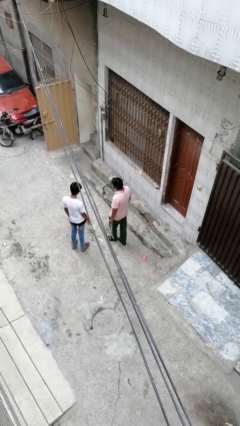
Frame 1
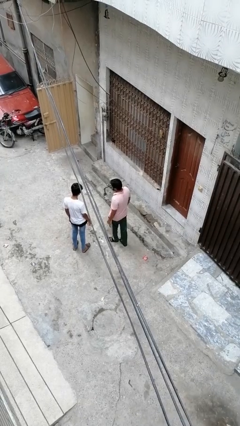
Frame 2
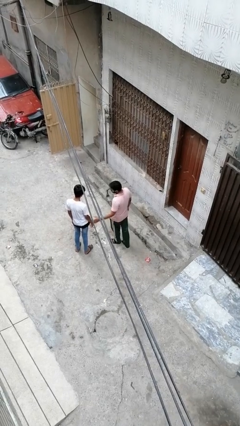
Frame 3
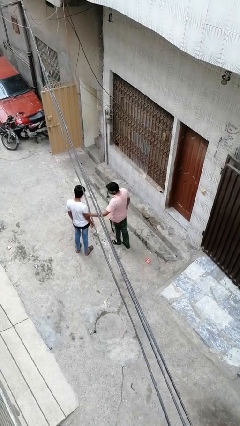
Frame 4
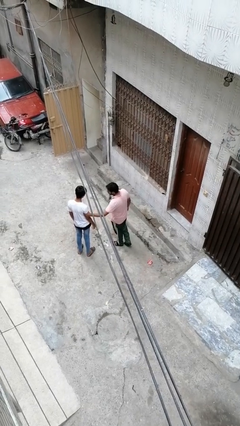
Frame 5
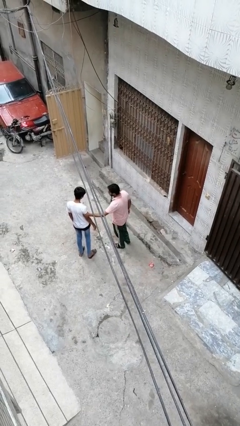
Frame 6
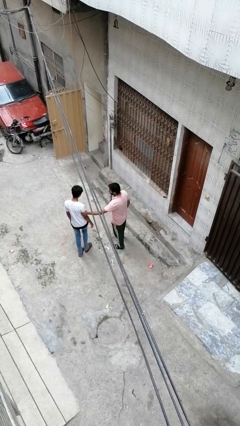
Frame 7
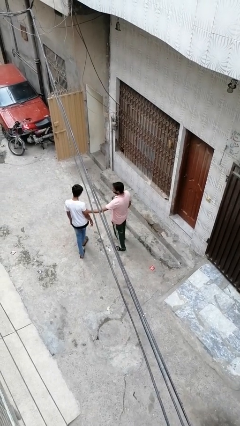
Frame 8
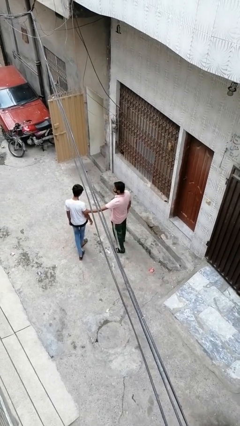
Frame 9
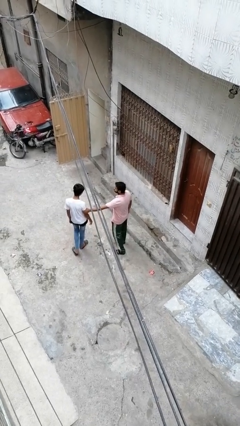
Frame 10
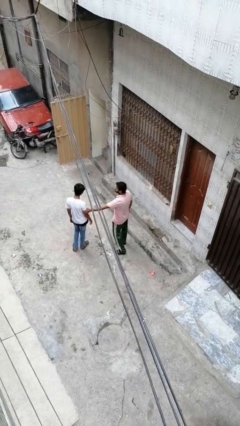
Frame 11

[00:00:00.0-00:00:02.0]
person grabs person by bicep

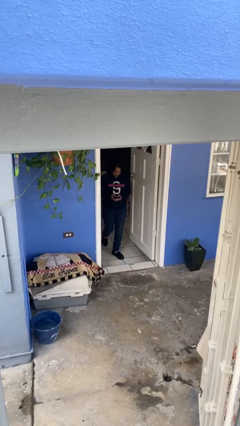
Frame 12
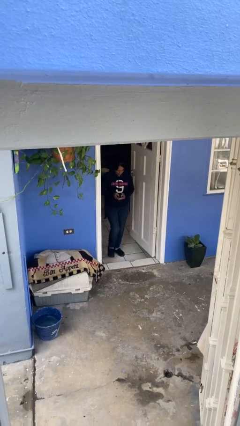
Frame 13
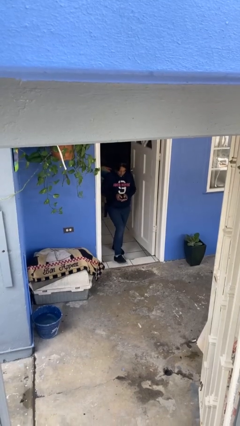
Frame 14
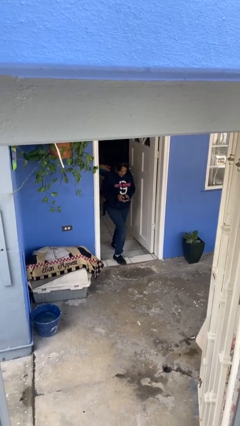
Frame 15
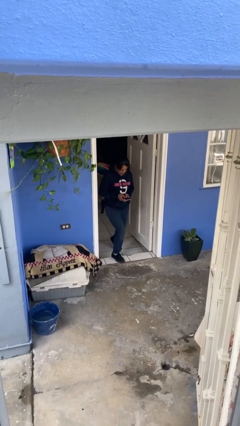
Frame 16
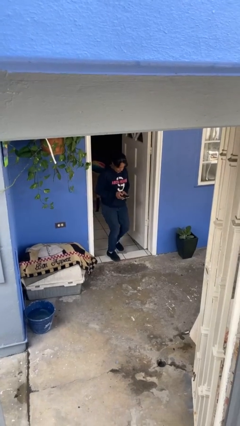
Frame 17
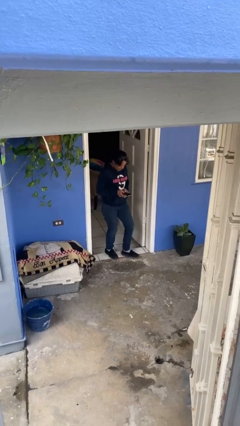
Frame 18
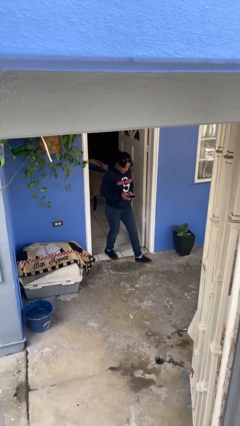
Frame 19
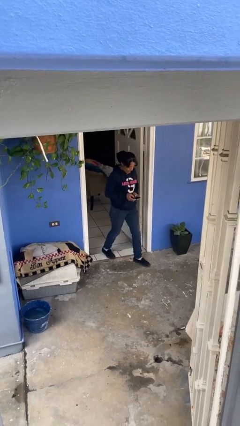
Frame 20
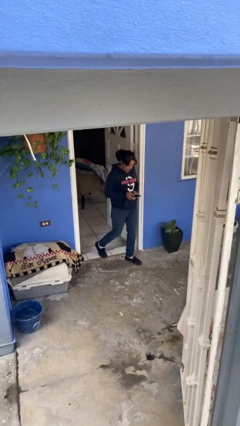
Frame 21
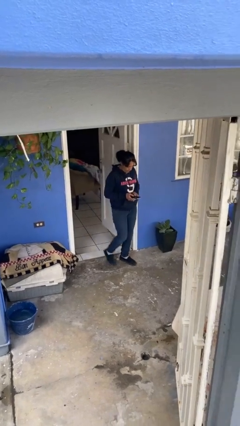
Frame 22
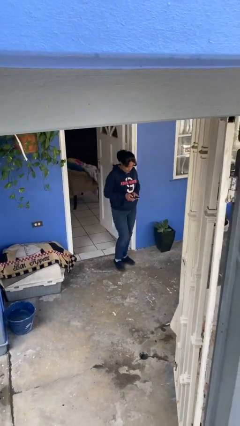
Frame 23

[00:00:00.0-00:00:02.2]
person enters scene through structure

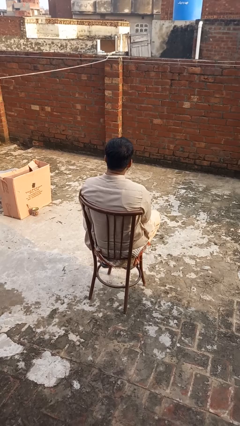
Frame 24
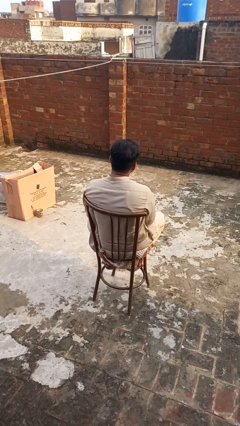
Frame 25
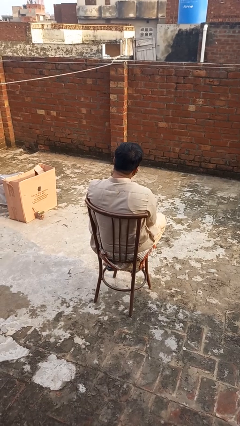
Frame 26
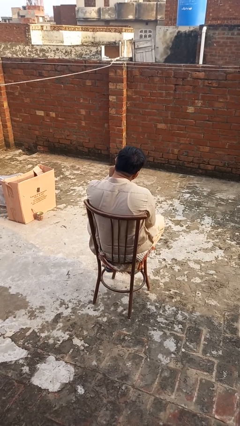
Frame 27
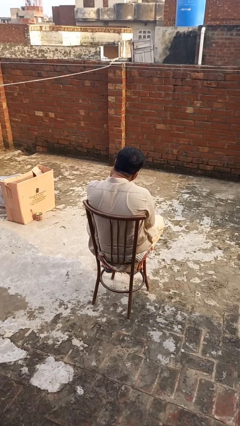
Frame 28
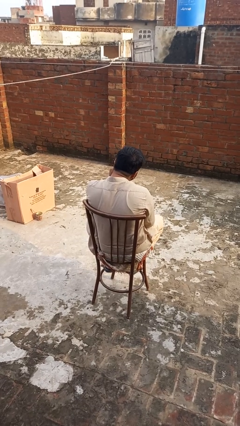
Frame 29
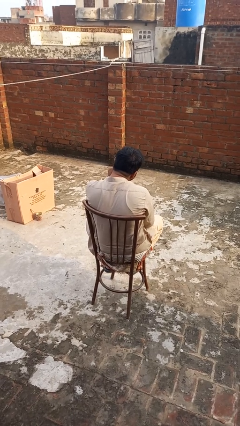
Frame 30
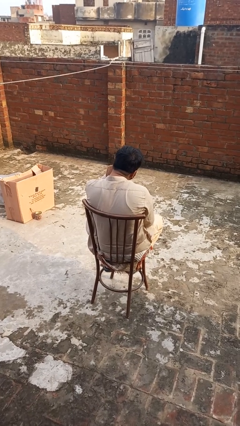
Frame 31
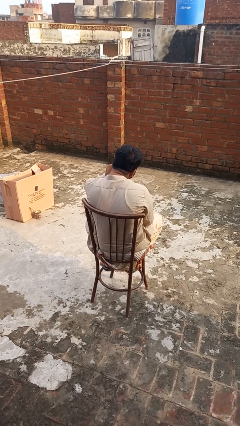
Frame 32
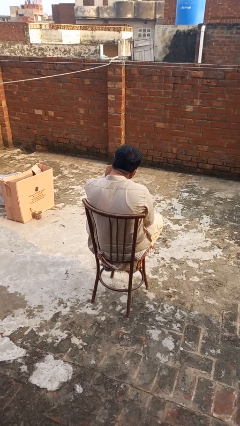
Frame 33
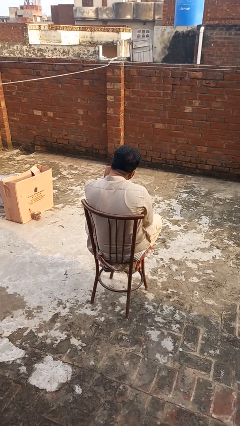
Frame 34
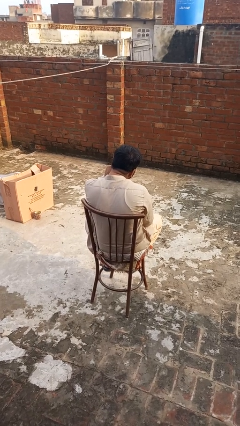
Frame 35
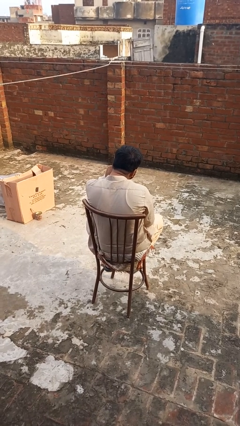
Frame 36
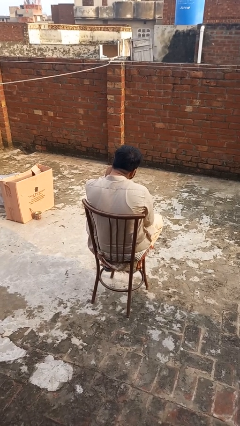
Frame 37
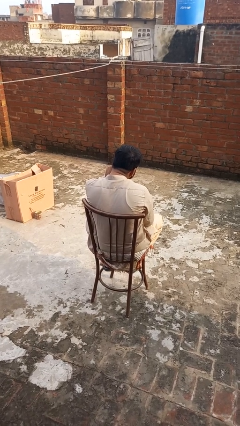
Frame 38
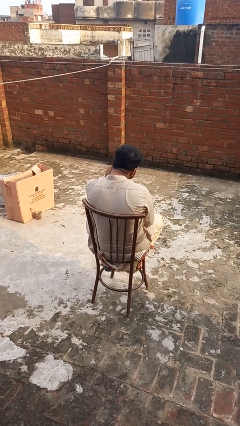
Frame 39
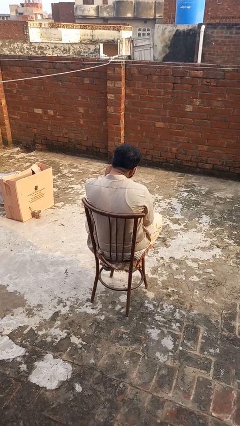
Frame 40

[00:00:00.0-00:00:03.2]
person gestures listen closely

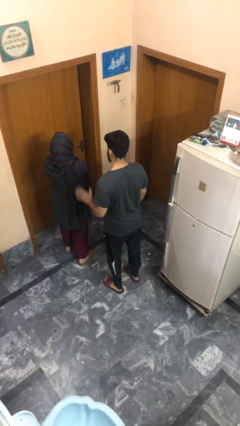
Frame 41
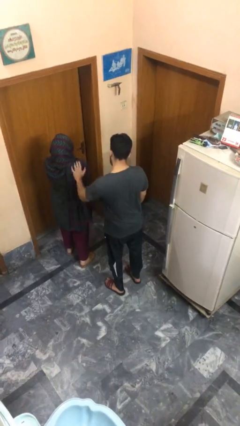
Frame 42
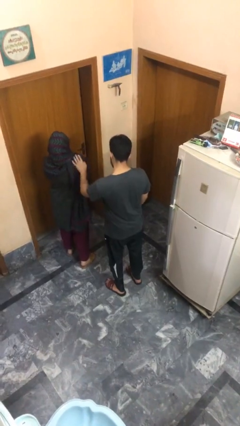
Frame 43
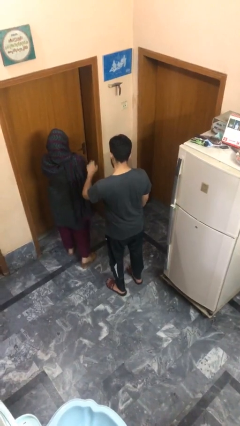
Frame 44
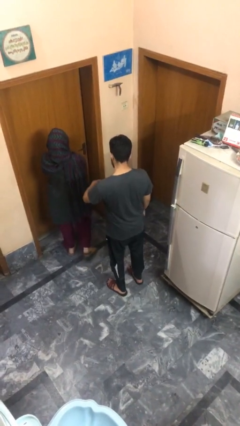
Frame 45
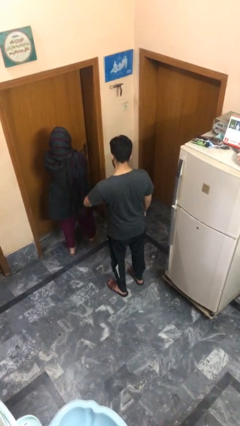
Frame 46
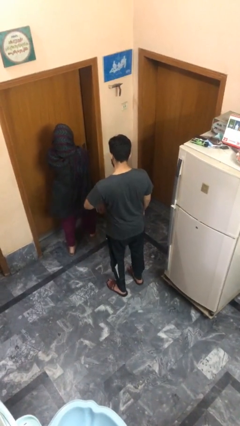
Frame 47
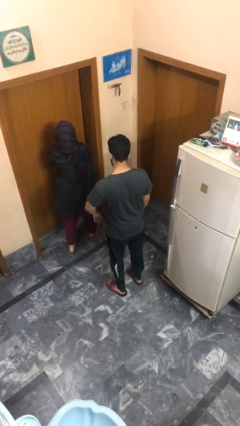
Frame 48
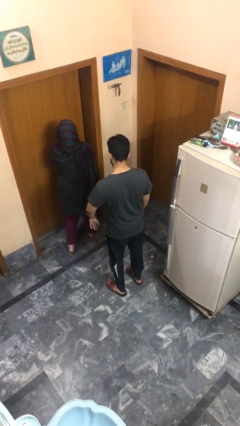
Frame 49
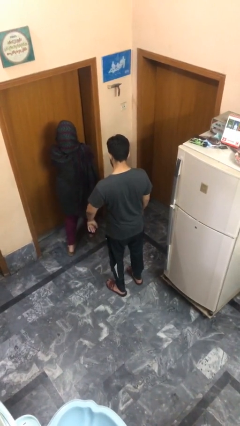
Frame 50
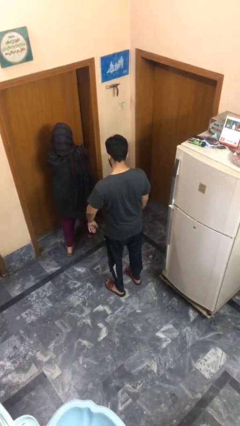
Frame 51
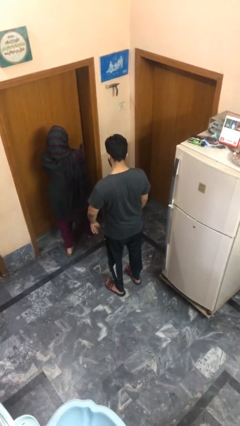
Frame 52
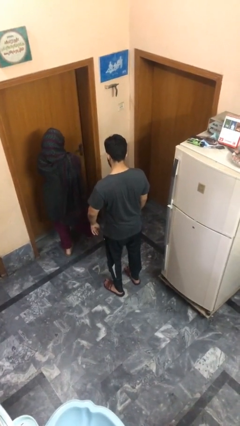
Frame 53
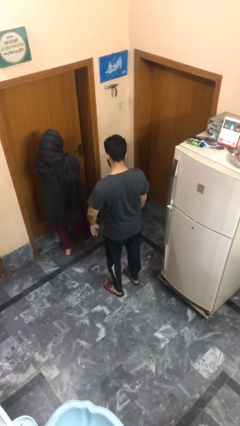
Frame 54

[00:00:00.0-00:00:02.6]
person shoves person

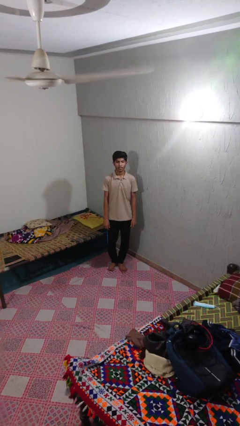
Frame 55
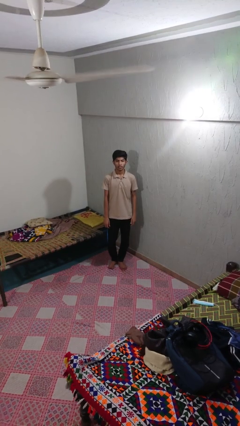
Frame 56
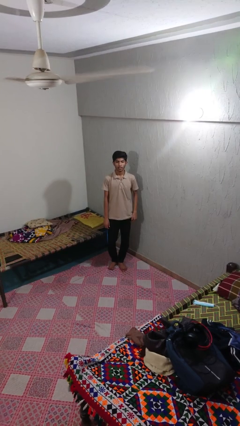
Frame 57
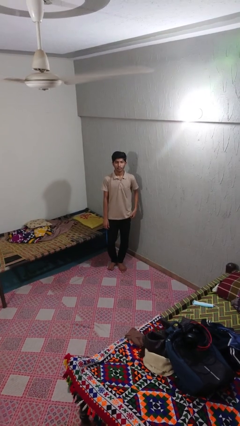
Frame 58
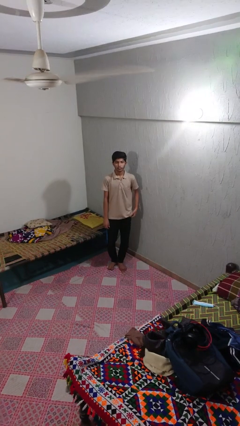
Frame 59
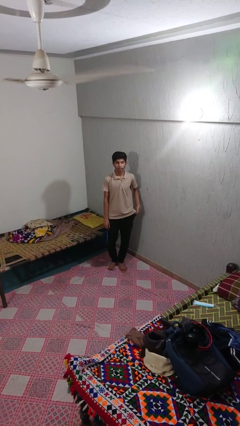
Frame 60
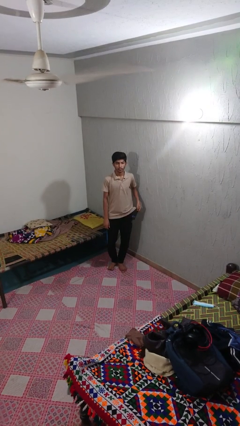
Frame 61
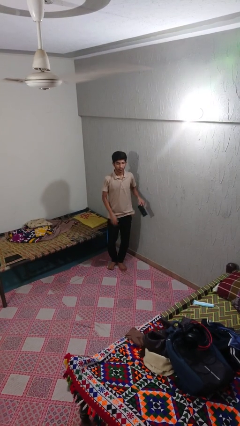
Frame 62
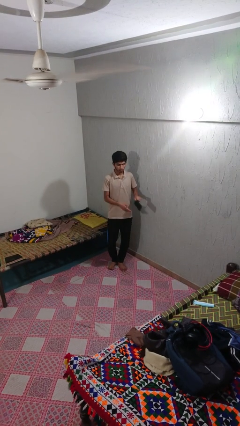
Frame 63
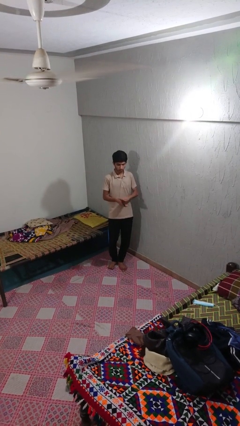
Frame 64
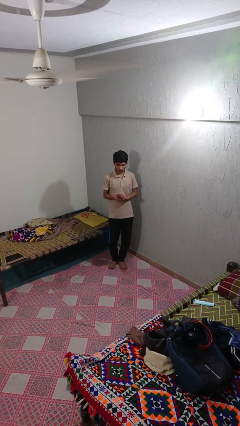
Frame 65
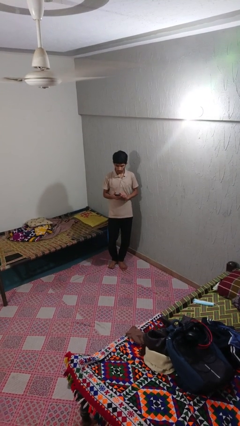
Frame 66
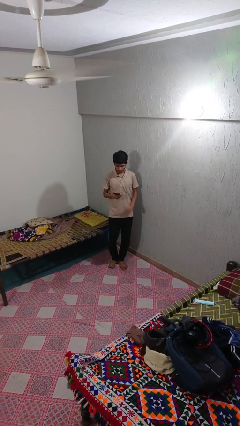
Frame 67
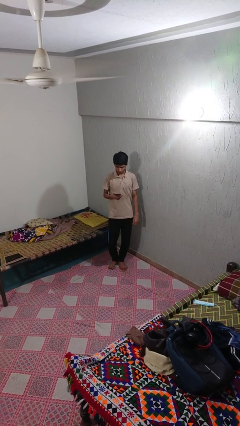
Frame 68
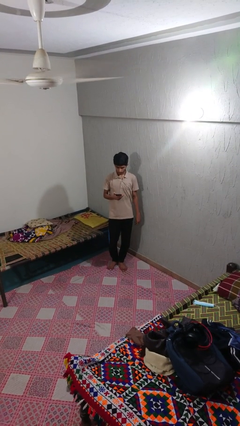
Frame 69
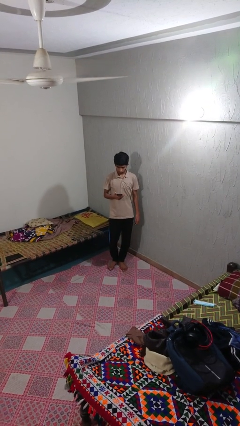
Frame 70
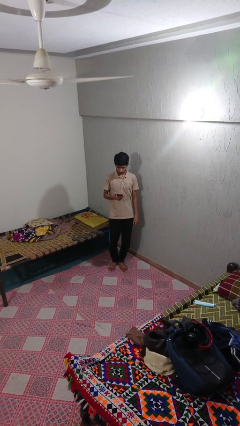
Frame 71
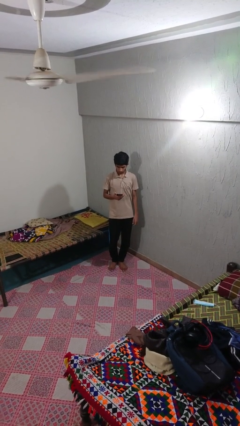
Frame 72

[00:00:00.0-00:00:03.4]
person takes phone from pocket

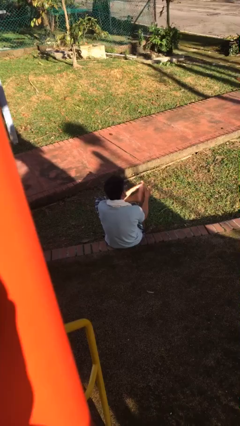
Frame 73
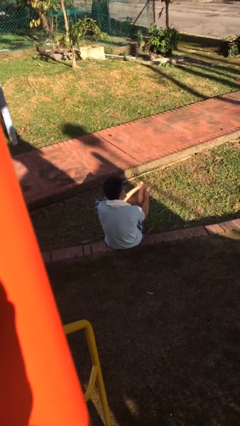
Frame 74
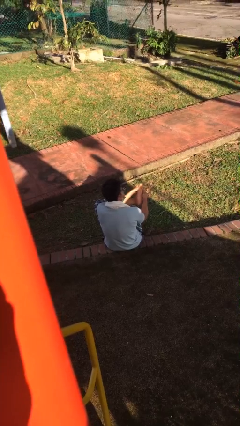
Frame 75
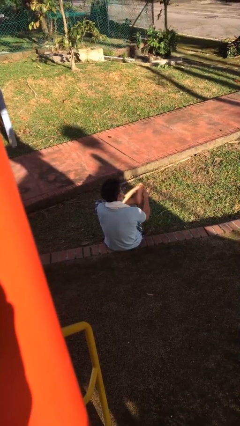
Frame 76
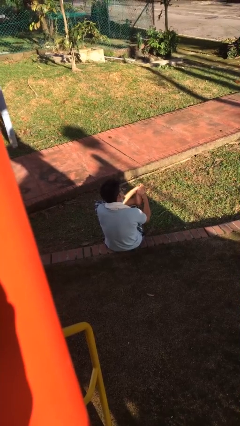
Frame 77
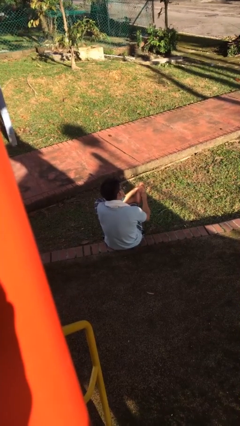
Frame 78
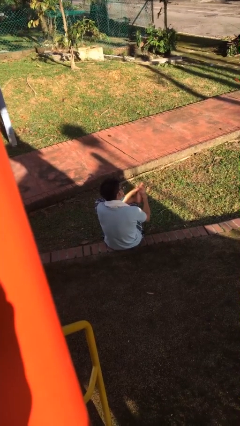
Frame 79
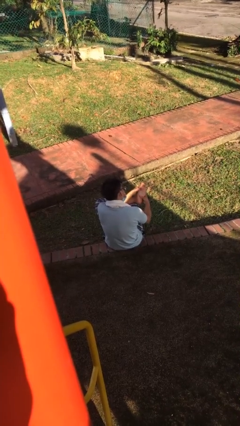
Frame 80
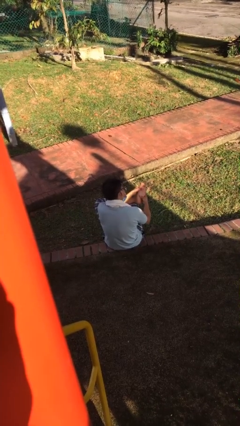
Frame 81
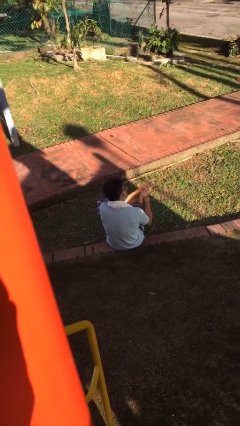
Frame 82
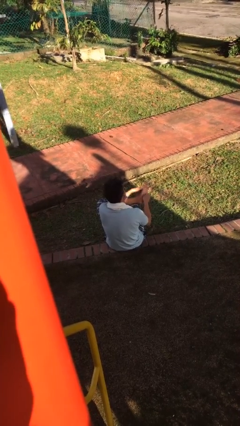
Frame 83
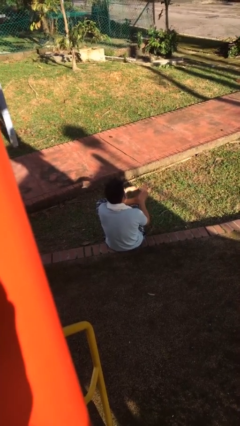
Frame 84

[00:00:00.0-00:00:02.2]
person rubs foot

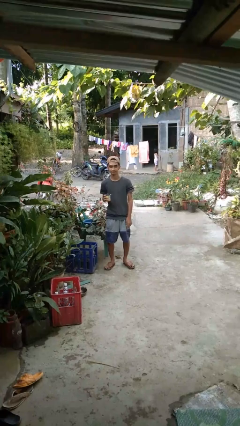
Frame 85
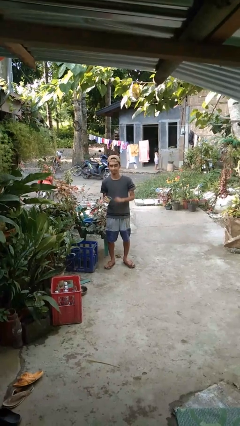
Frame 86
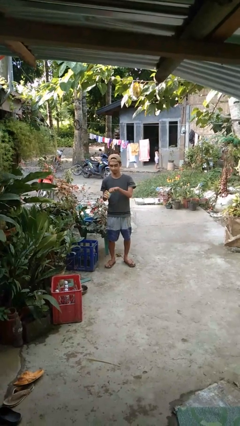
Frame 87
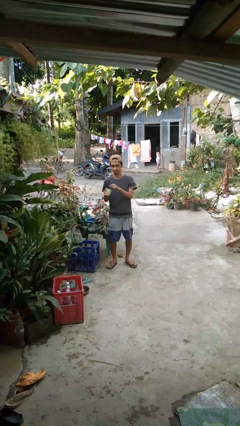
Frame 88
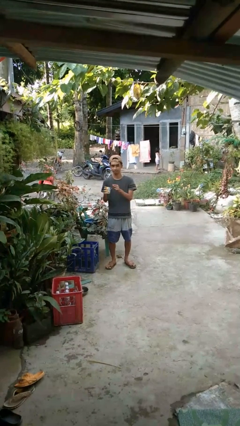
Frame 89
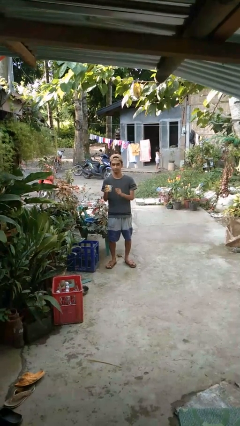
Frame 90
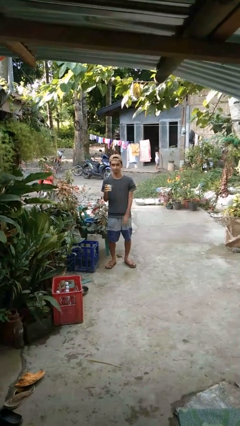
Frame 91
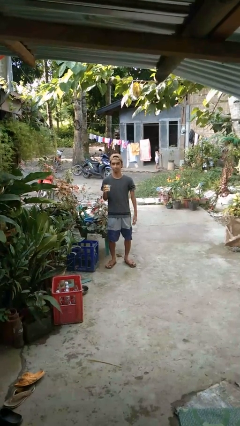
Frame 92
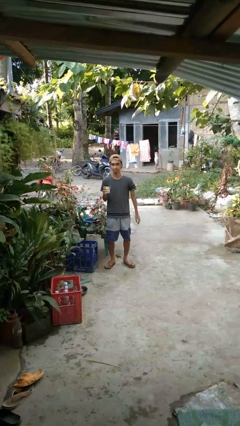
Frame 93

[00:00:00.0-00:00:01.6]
person opens beverage can
